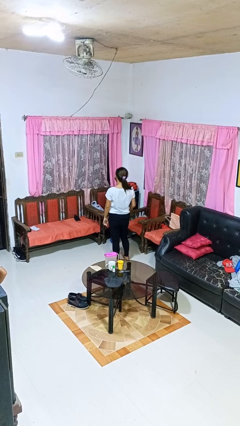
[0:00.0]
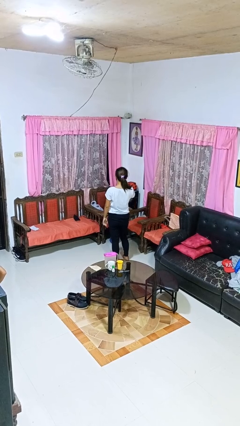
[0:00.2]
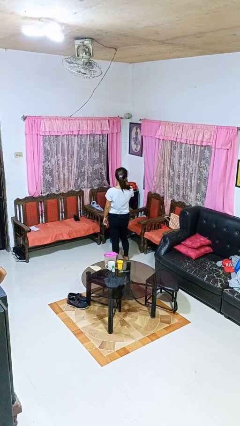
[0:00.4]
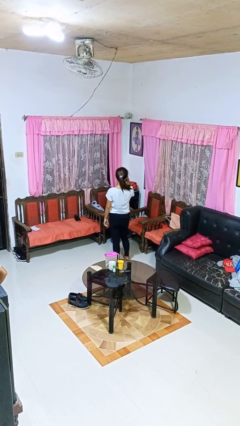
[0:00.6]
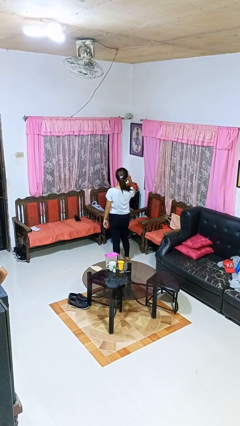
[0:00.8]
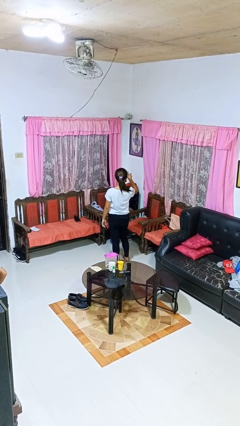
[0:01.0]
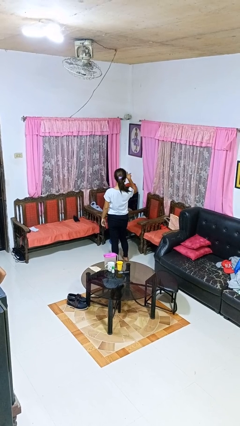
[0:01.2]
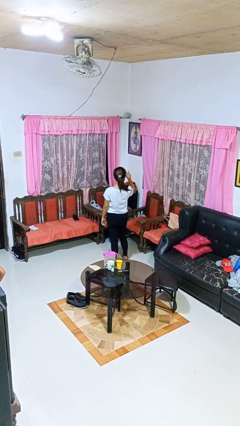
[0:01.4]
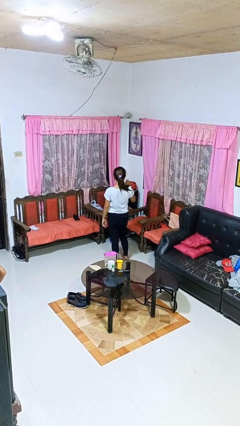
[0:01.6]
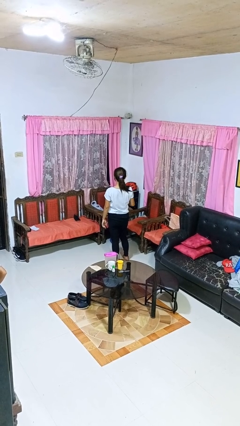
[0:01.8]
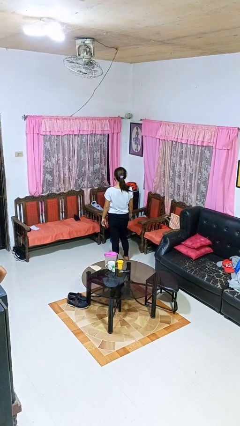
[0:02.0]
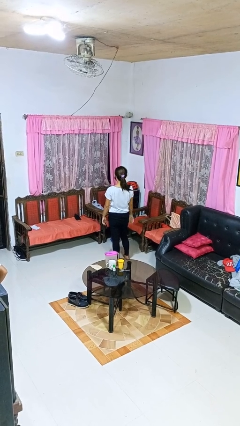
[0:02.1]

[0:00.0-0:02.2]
person gestures watch closely

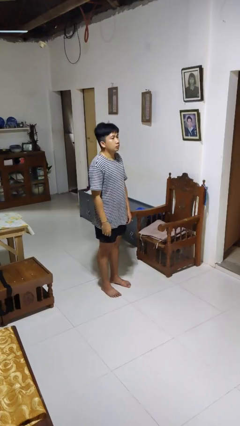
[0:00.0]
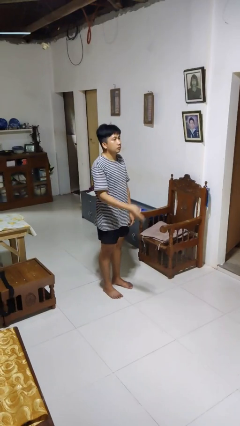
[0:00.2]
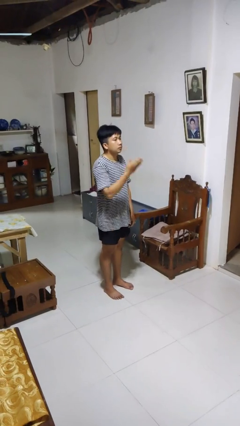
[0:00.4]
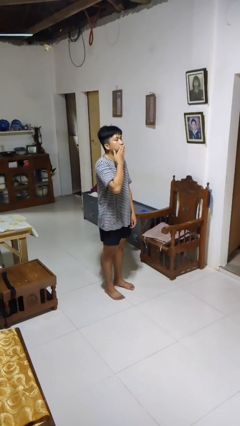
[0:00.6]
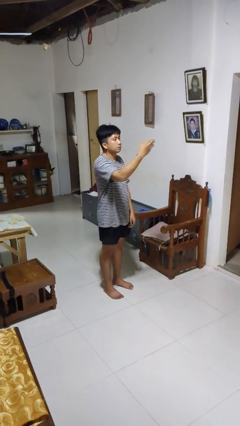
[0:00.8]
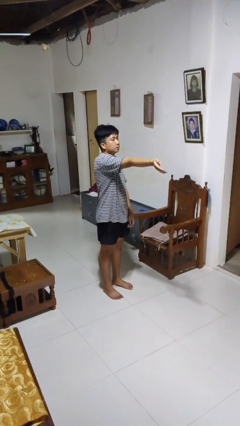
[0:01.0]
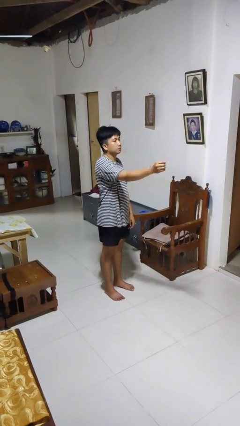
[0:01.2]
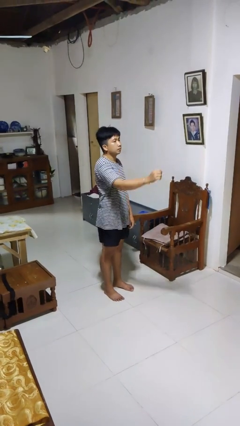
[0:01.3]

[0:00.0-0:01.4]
person gestures blow kiss

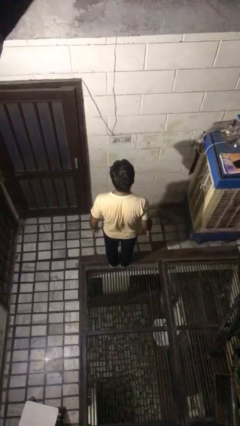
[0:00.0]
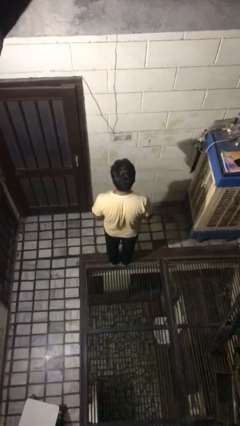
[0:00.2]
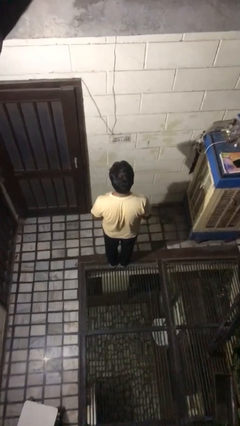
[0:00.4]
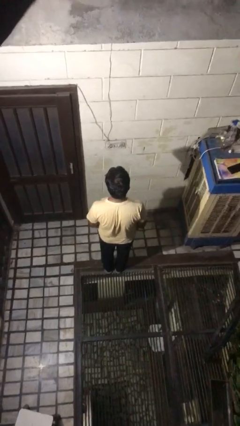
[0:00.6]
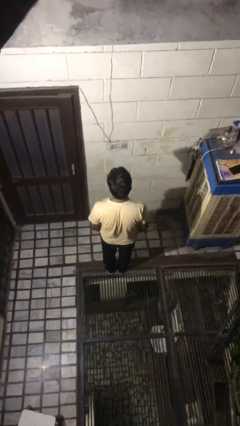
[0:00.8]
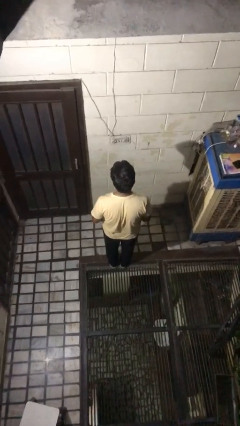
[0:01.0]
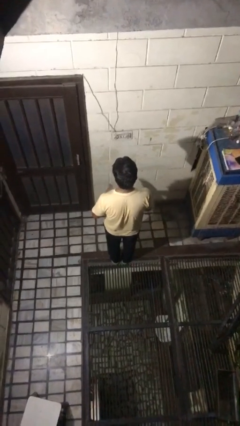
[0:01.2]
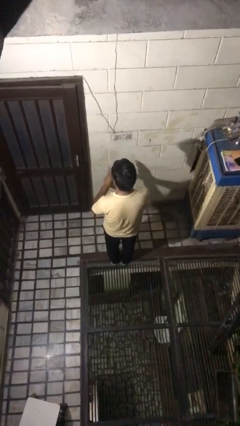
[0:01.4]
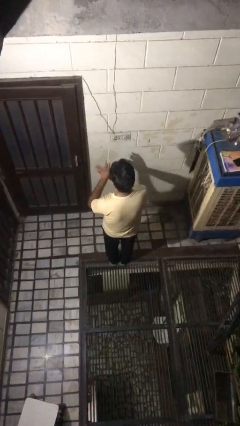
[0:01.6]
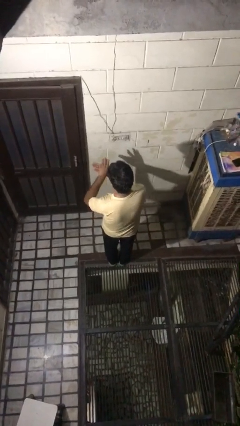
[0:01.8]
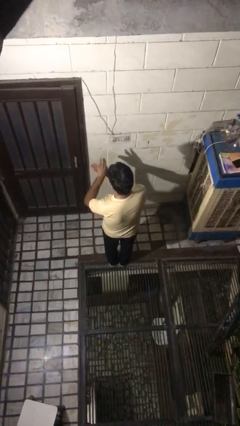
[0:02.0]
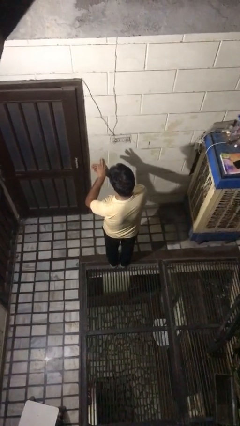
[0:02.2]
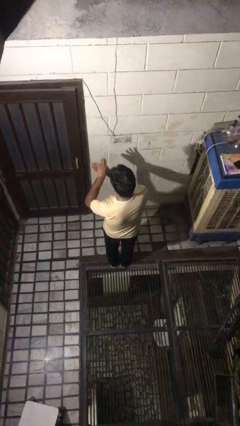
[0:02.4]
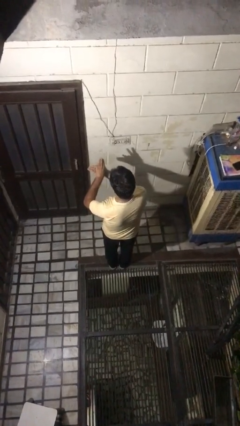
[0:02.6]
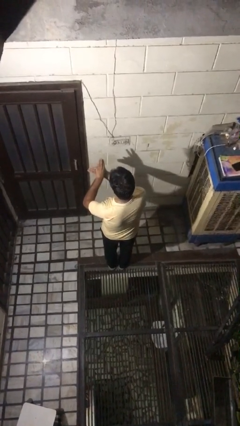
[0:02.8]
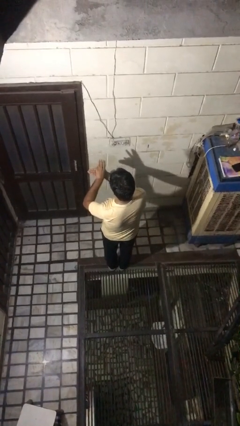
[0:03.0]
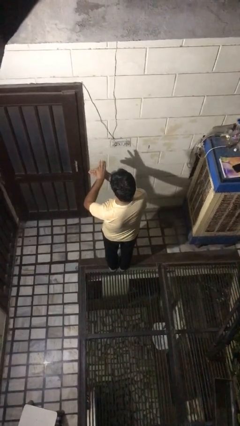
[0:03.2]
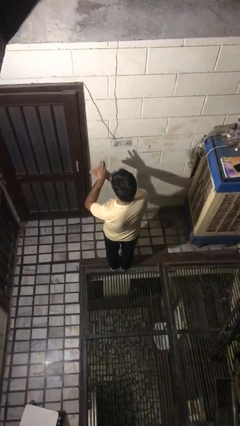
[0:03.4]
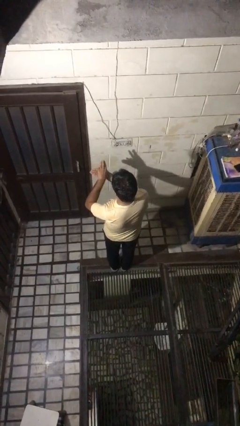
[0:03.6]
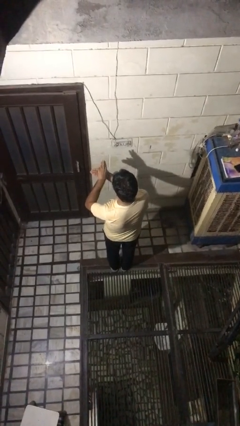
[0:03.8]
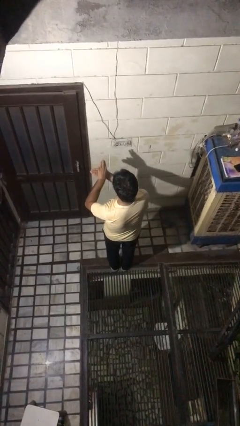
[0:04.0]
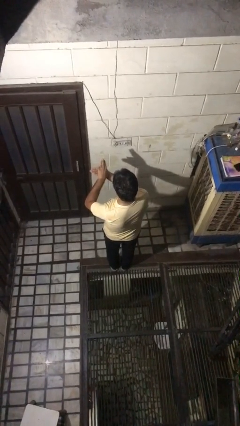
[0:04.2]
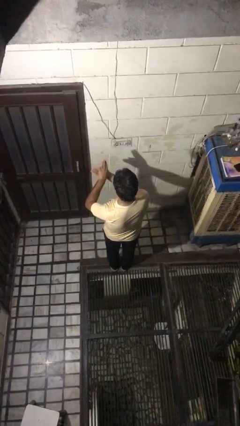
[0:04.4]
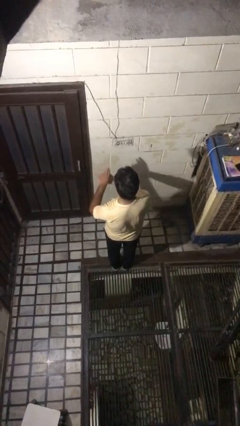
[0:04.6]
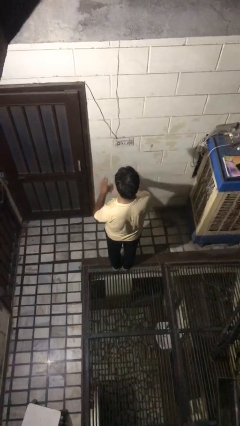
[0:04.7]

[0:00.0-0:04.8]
person gestures number three

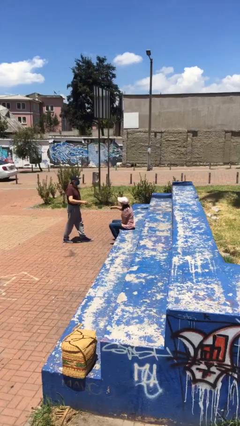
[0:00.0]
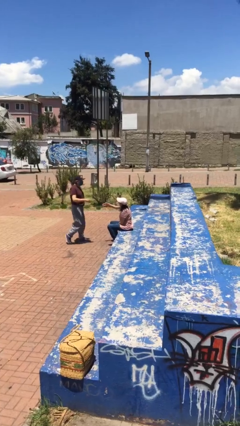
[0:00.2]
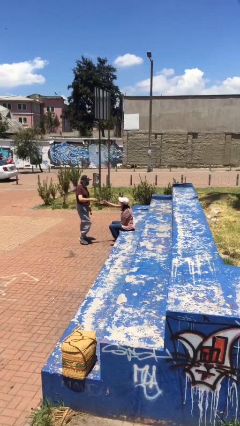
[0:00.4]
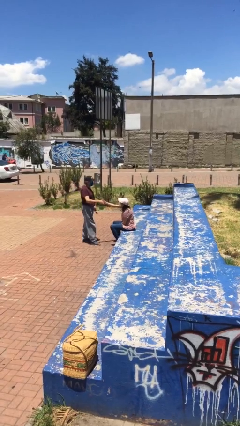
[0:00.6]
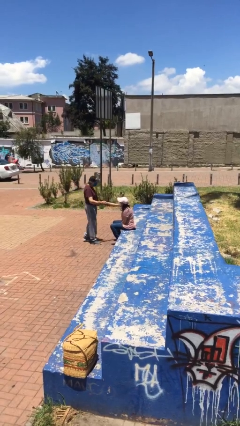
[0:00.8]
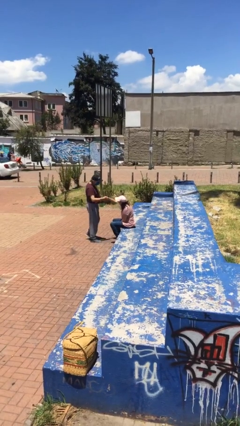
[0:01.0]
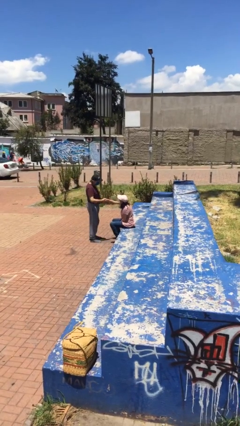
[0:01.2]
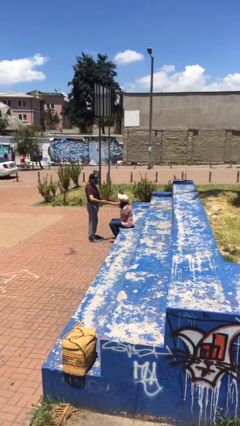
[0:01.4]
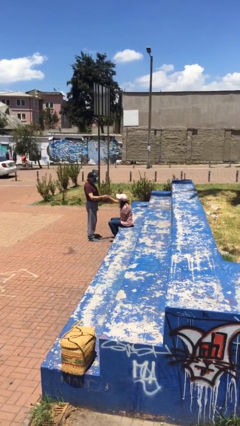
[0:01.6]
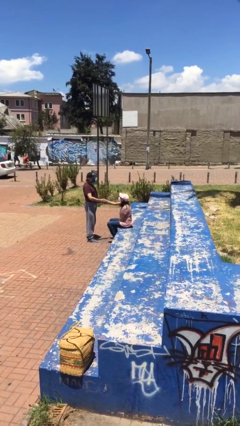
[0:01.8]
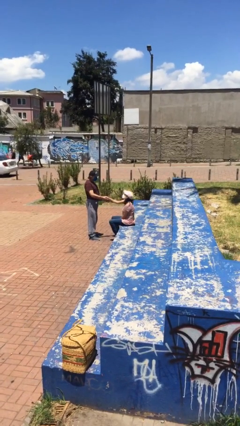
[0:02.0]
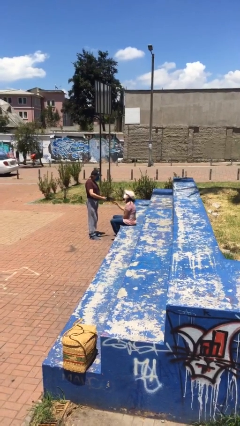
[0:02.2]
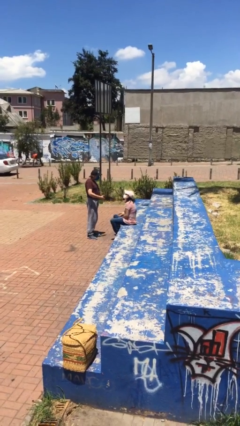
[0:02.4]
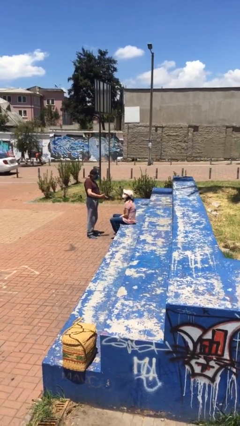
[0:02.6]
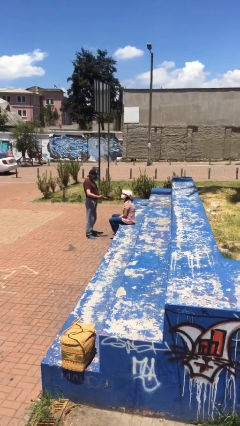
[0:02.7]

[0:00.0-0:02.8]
person shakes hand

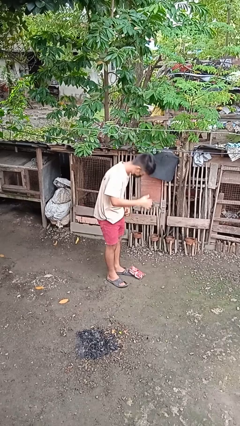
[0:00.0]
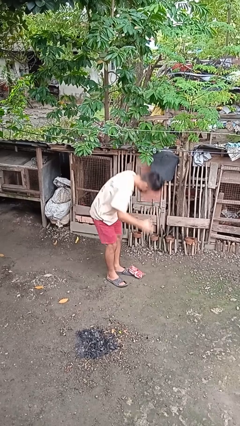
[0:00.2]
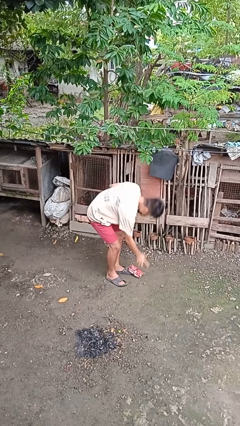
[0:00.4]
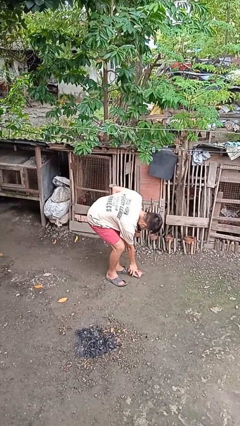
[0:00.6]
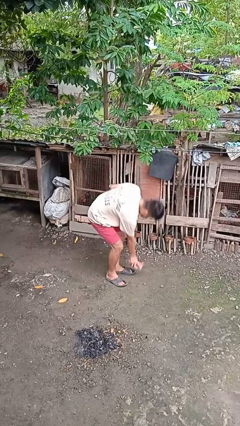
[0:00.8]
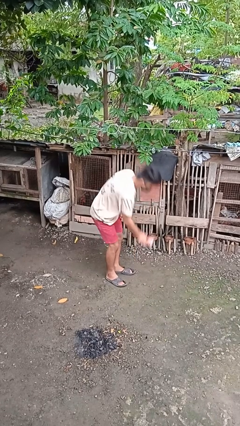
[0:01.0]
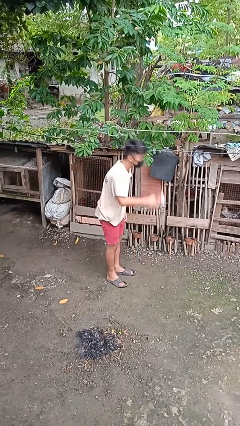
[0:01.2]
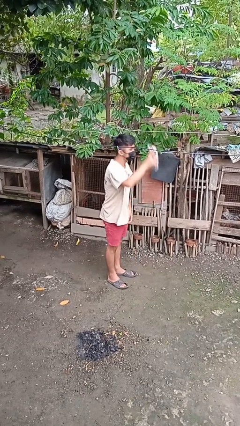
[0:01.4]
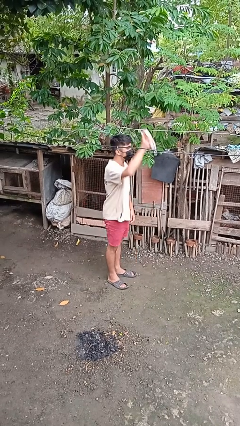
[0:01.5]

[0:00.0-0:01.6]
person picks up object from floor

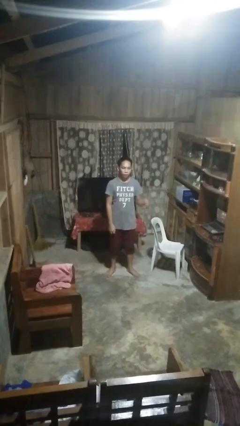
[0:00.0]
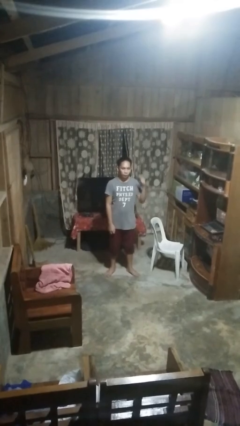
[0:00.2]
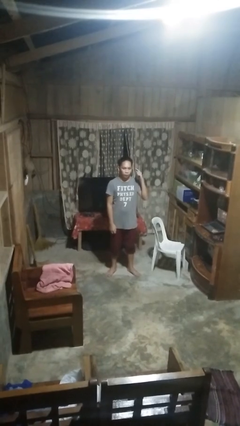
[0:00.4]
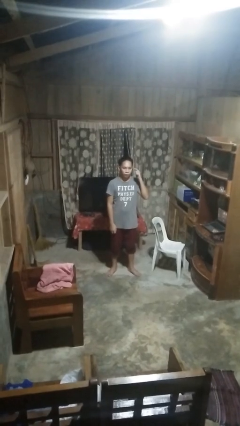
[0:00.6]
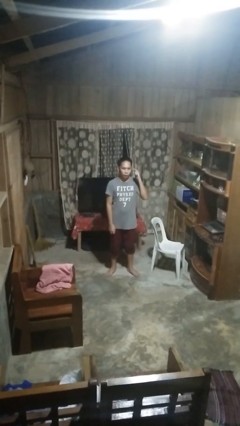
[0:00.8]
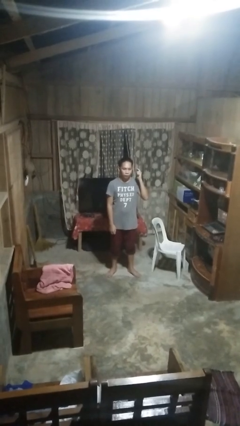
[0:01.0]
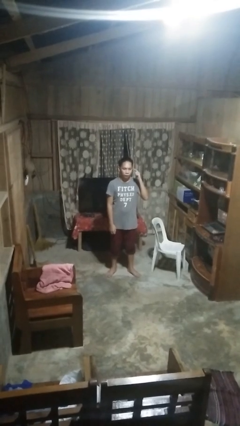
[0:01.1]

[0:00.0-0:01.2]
person gestures listen closely

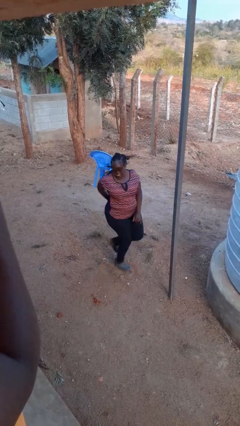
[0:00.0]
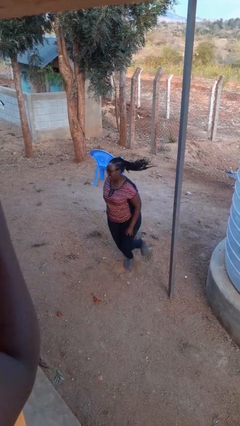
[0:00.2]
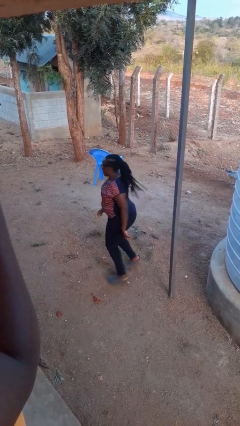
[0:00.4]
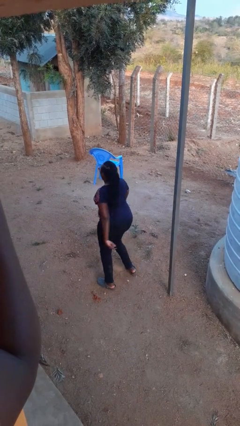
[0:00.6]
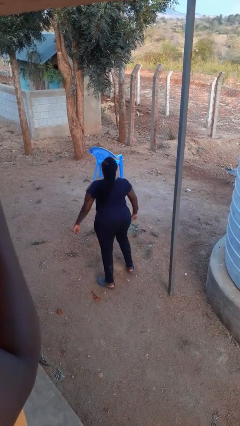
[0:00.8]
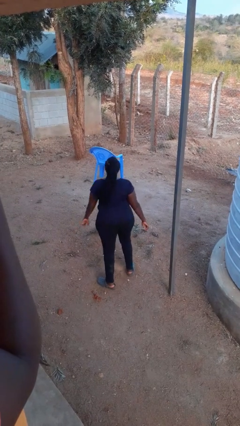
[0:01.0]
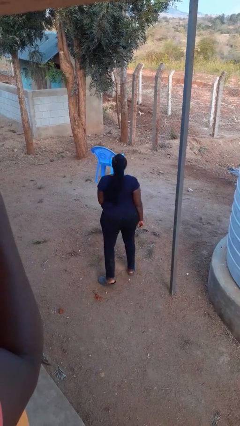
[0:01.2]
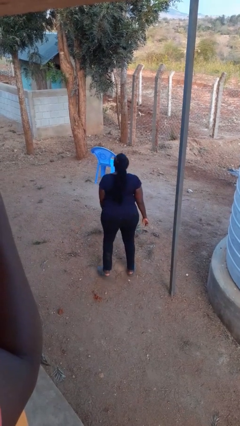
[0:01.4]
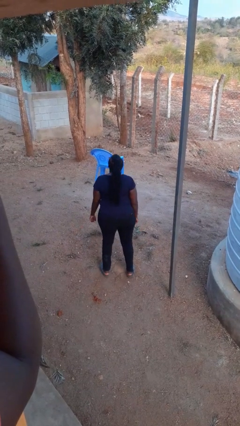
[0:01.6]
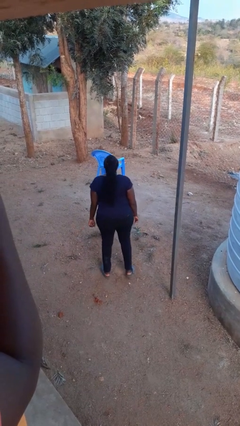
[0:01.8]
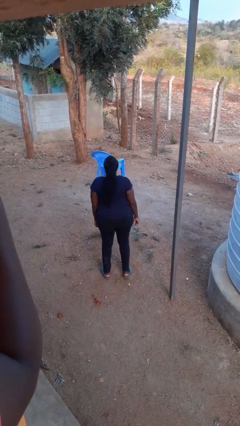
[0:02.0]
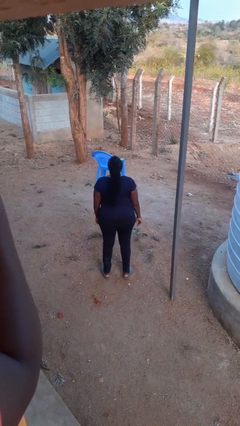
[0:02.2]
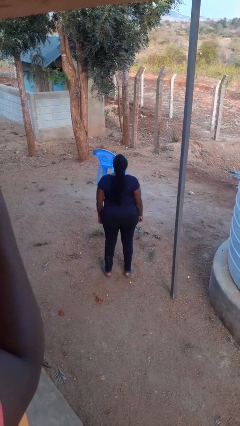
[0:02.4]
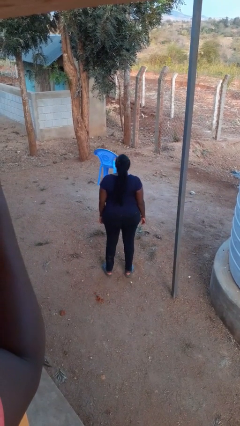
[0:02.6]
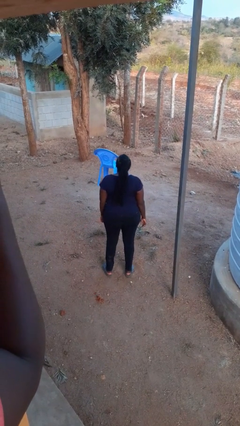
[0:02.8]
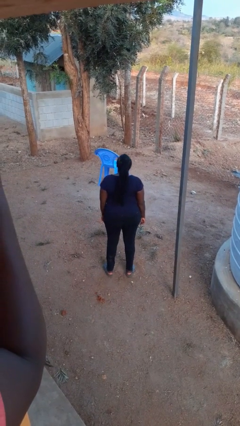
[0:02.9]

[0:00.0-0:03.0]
person twirls

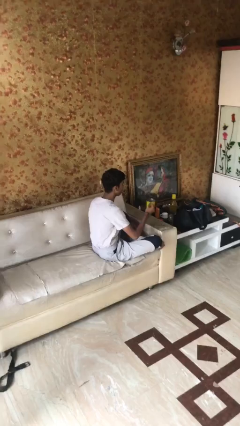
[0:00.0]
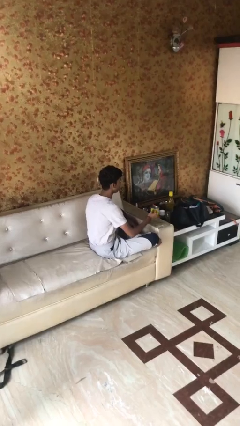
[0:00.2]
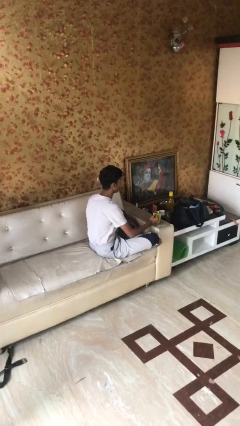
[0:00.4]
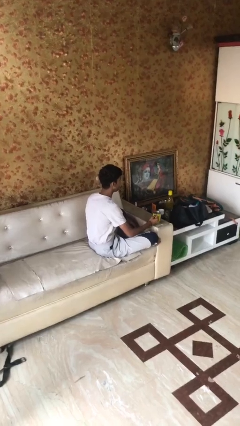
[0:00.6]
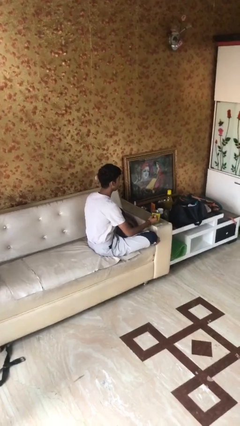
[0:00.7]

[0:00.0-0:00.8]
person puts down object on table
